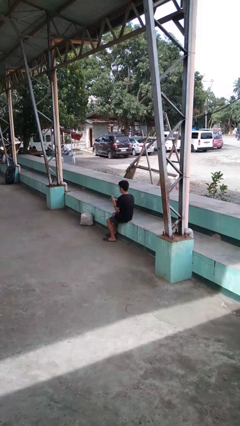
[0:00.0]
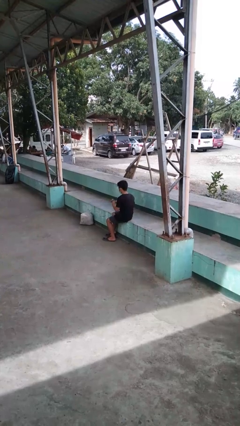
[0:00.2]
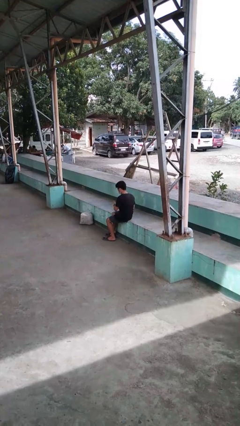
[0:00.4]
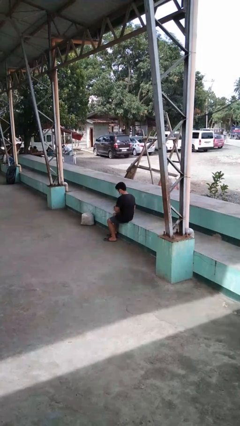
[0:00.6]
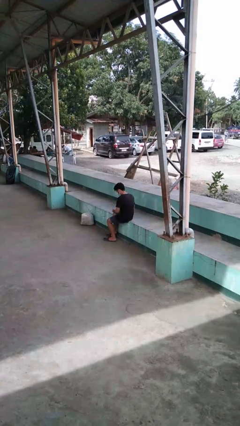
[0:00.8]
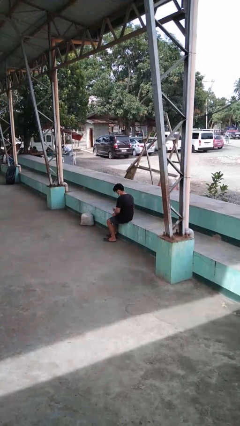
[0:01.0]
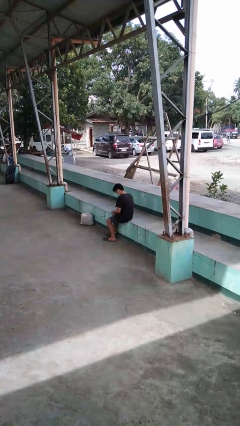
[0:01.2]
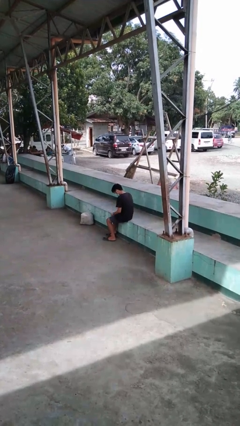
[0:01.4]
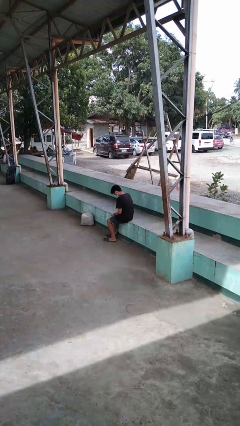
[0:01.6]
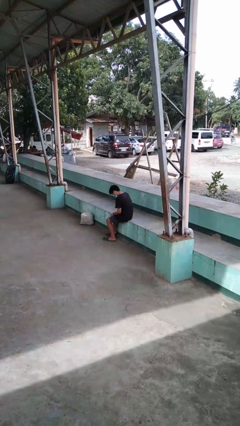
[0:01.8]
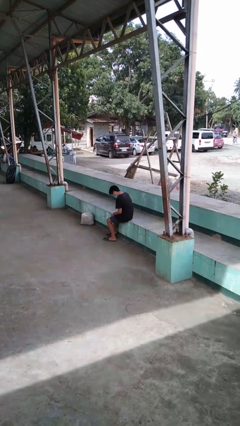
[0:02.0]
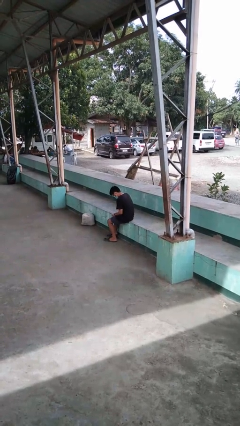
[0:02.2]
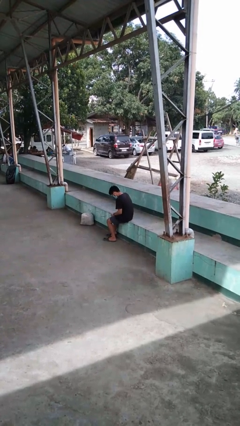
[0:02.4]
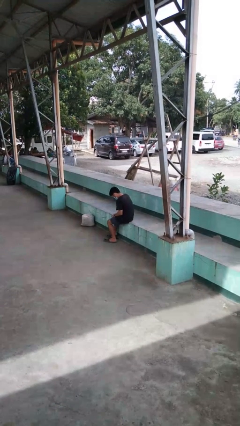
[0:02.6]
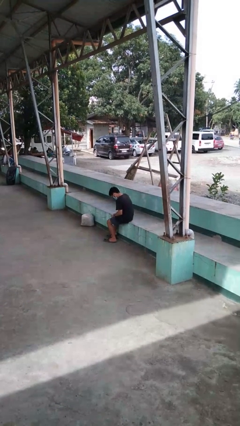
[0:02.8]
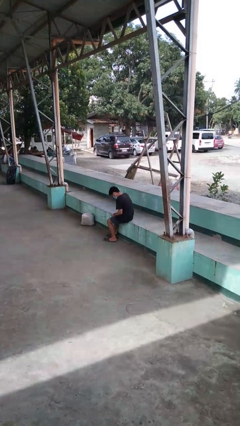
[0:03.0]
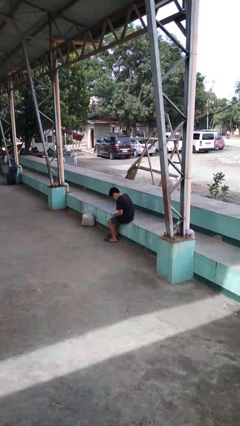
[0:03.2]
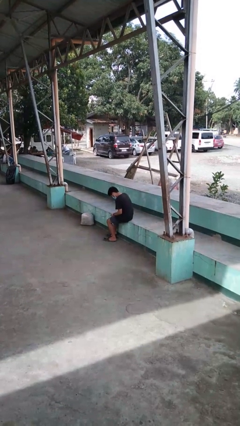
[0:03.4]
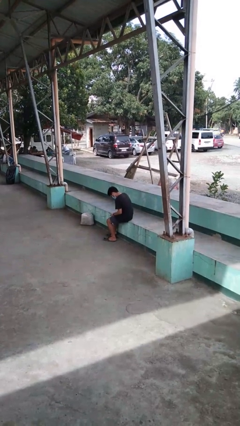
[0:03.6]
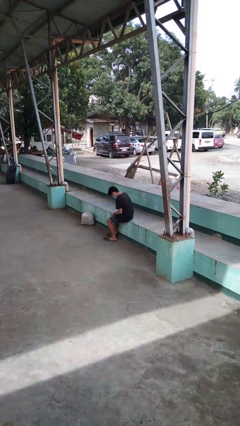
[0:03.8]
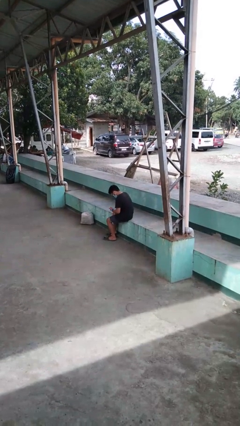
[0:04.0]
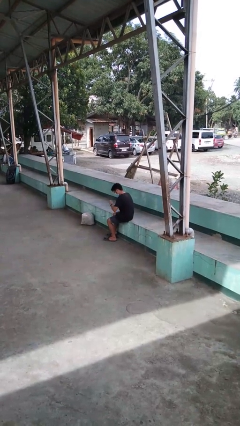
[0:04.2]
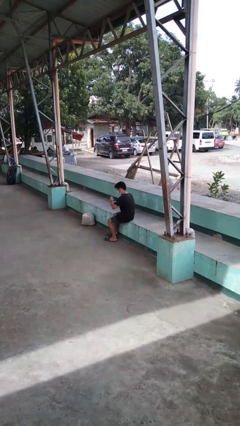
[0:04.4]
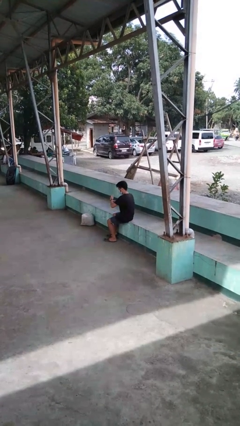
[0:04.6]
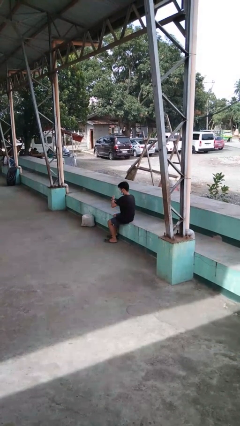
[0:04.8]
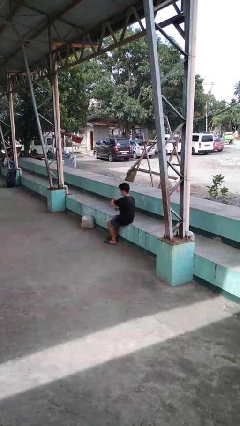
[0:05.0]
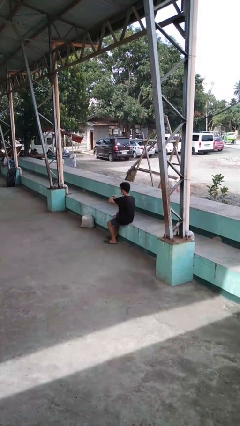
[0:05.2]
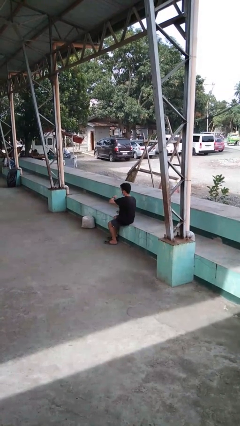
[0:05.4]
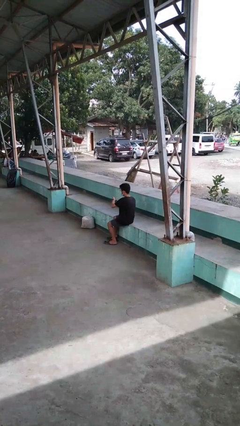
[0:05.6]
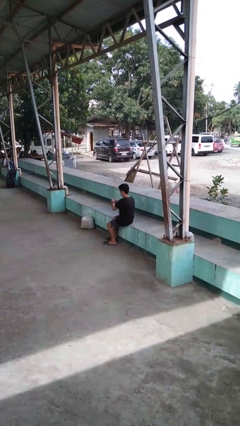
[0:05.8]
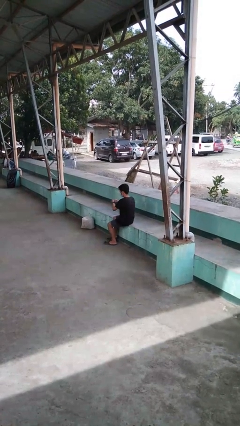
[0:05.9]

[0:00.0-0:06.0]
person puts on wristwatch

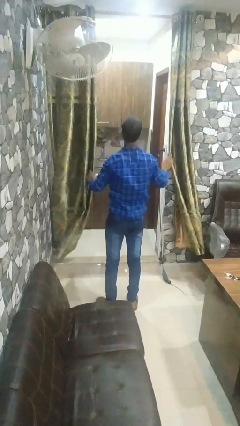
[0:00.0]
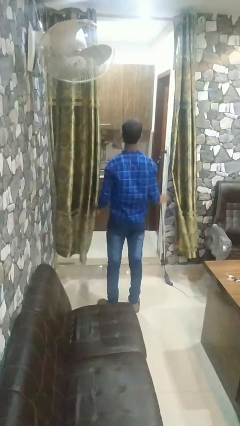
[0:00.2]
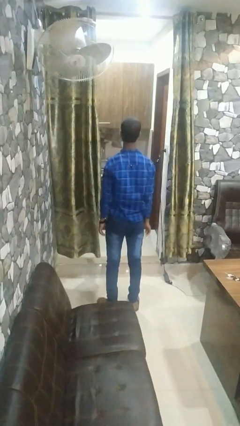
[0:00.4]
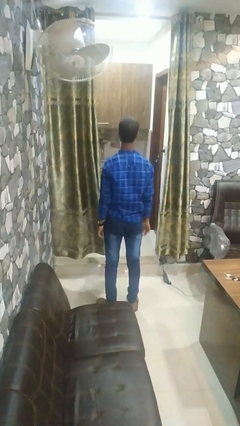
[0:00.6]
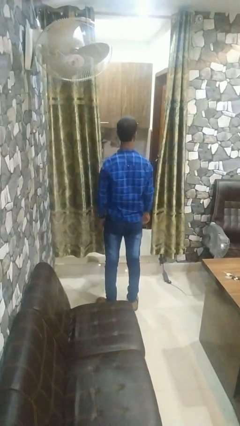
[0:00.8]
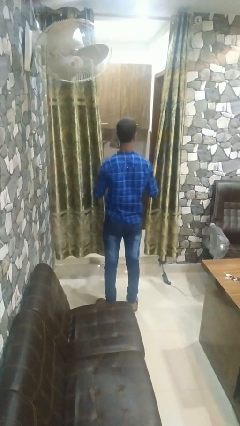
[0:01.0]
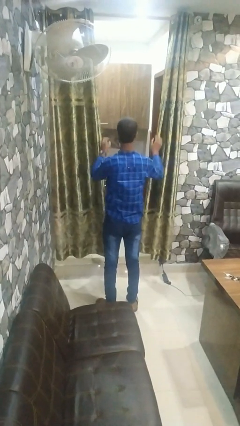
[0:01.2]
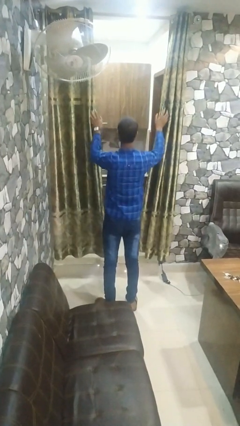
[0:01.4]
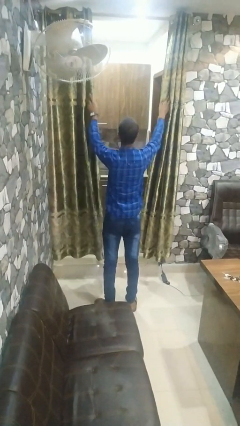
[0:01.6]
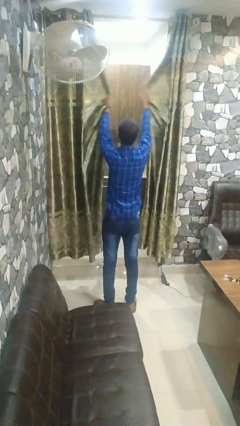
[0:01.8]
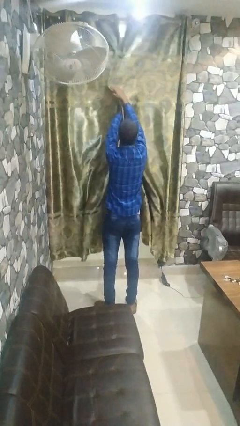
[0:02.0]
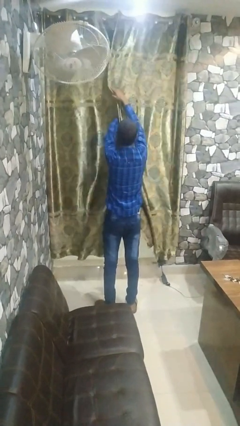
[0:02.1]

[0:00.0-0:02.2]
person closes curtains

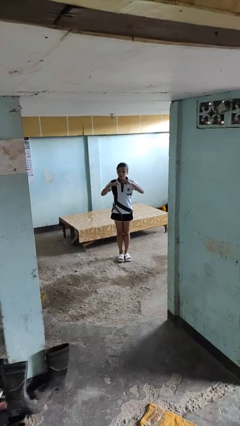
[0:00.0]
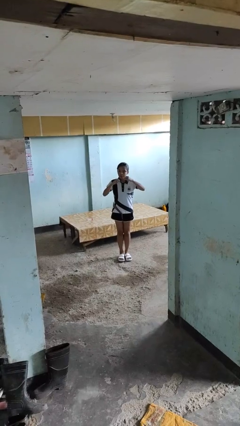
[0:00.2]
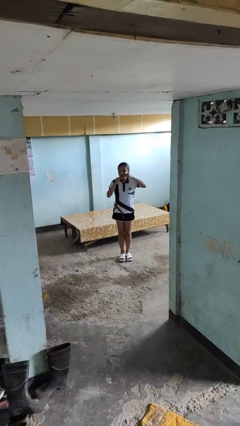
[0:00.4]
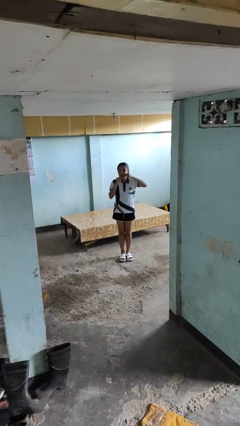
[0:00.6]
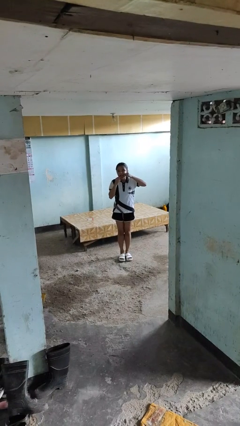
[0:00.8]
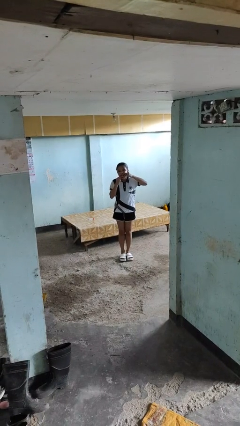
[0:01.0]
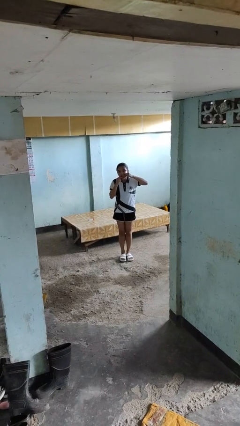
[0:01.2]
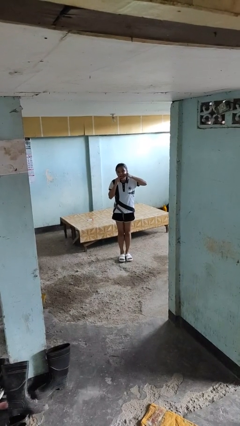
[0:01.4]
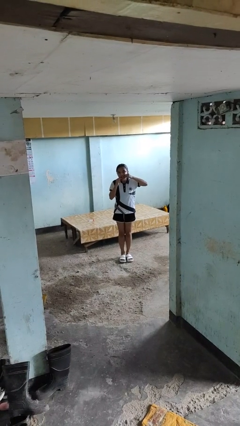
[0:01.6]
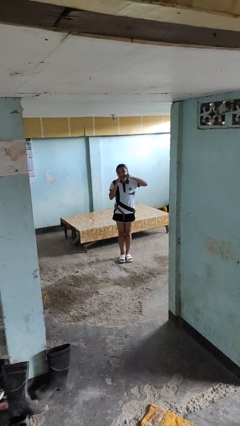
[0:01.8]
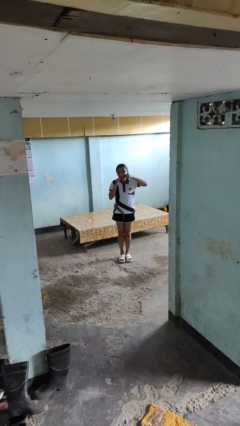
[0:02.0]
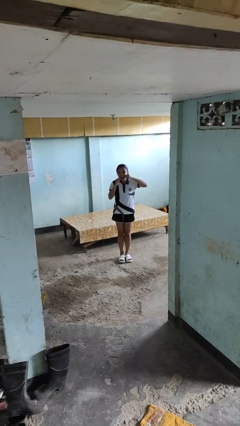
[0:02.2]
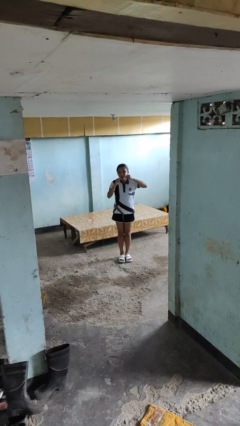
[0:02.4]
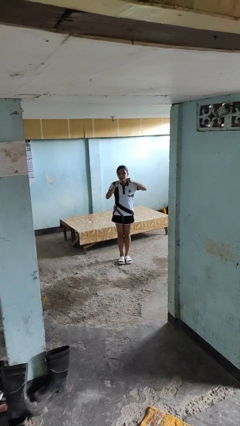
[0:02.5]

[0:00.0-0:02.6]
person flosses

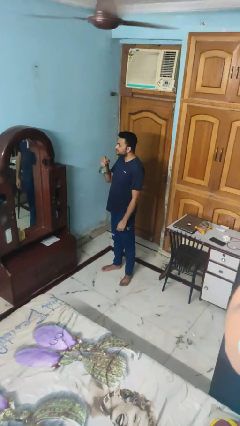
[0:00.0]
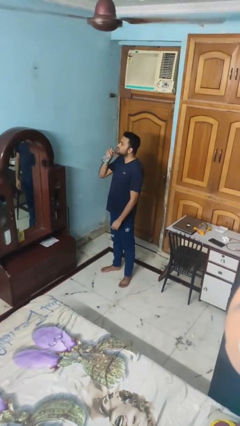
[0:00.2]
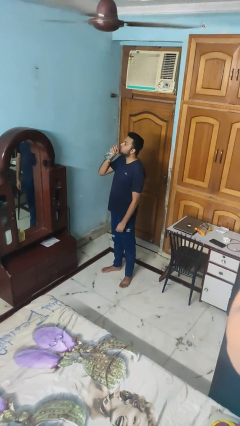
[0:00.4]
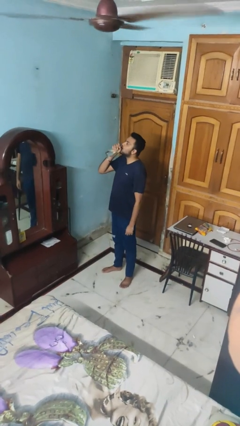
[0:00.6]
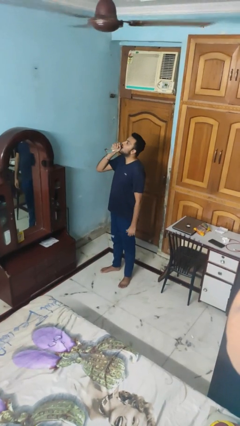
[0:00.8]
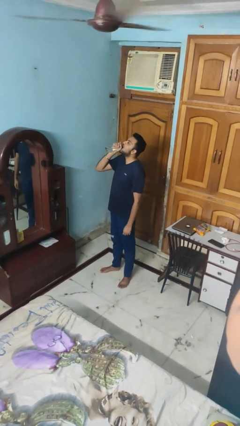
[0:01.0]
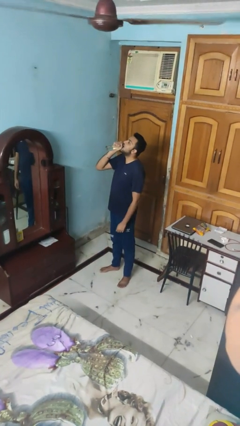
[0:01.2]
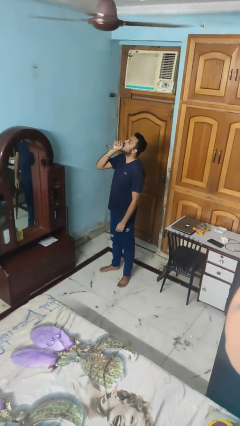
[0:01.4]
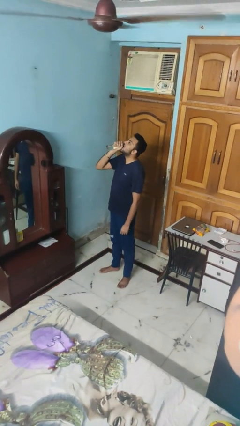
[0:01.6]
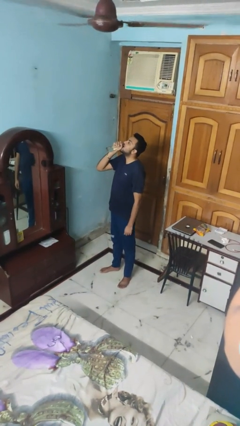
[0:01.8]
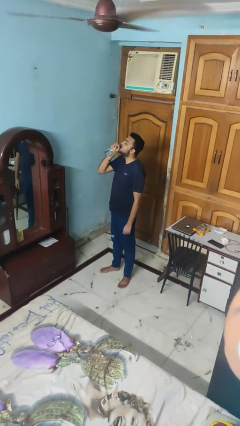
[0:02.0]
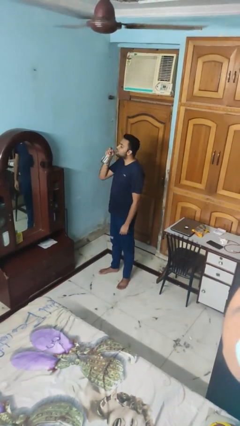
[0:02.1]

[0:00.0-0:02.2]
person drinks from bottle

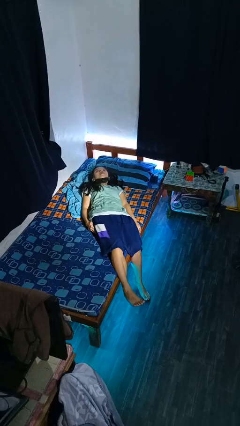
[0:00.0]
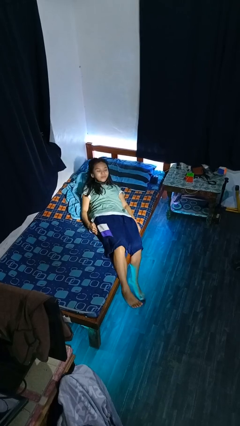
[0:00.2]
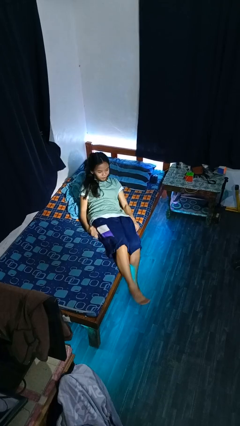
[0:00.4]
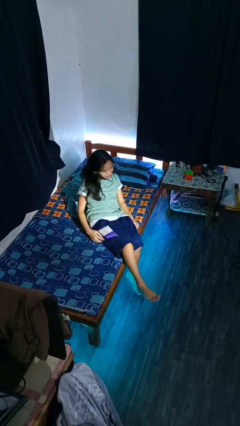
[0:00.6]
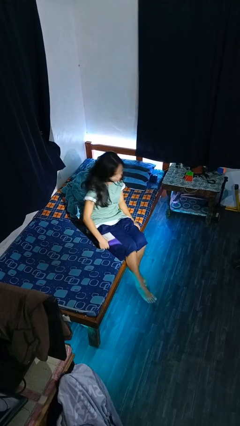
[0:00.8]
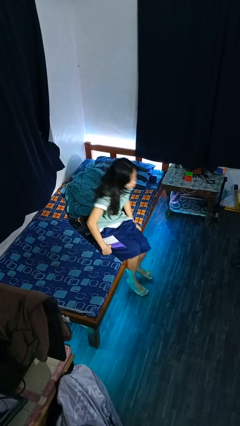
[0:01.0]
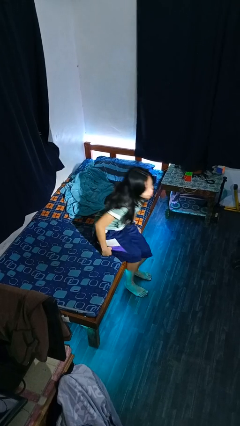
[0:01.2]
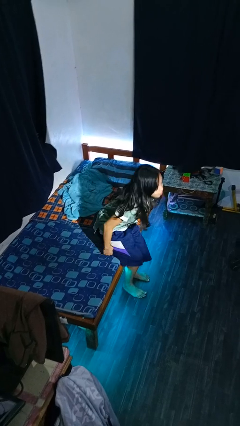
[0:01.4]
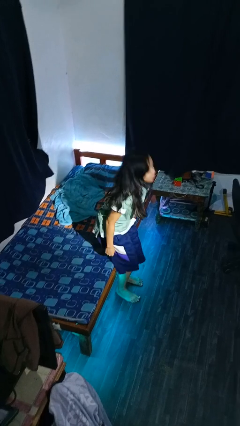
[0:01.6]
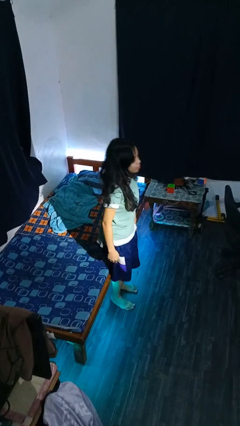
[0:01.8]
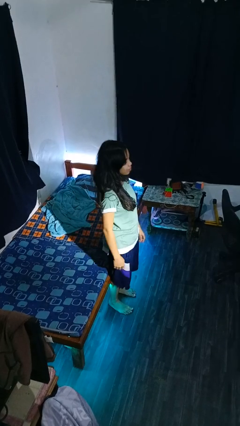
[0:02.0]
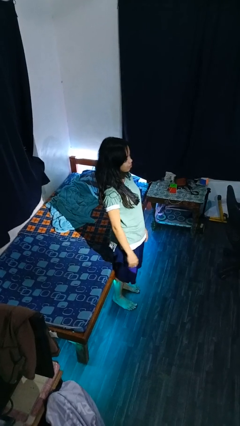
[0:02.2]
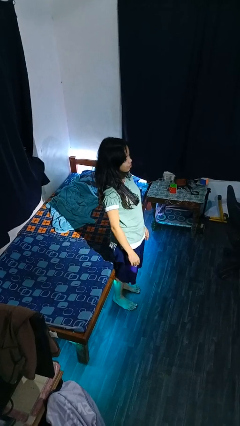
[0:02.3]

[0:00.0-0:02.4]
person stands up

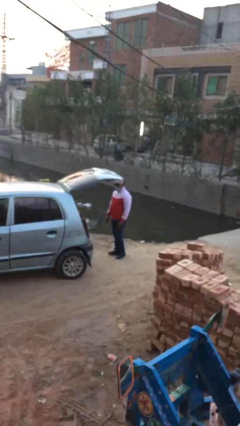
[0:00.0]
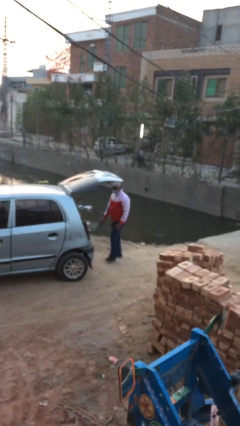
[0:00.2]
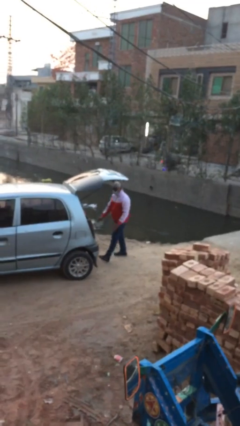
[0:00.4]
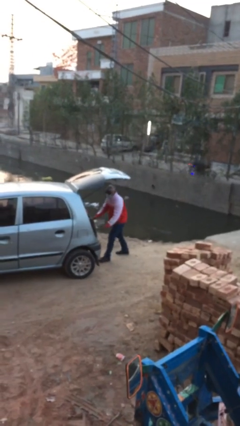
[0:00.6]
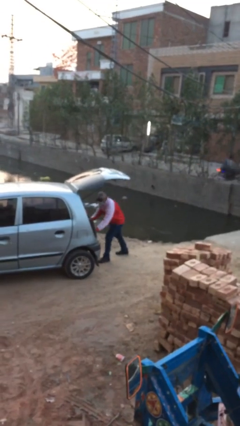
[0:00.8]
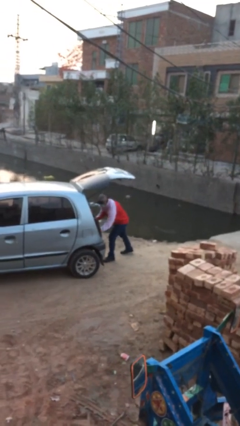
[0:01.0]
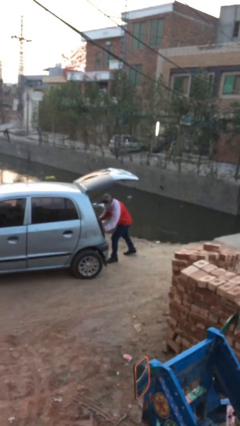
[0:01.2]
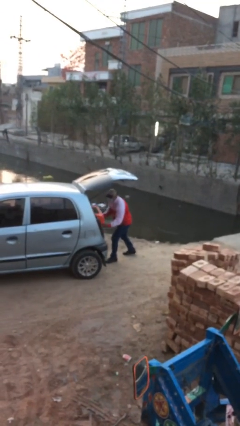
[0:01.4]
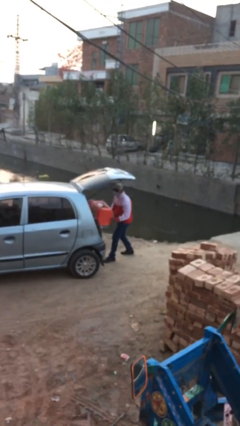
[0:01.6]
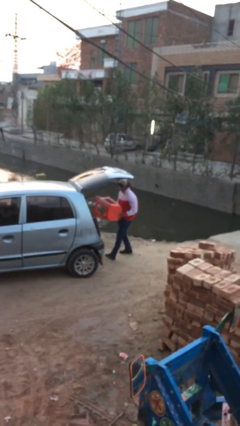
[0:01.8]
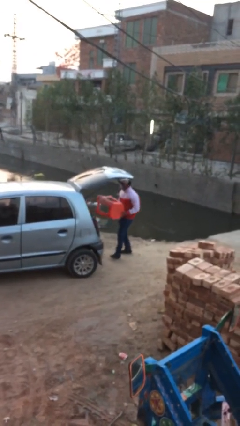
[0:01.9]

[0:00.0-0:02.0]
person unloads car

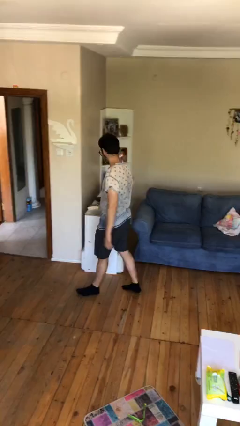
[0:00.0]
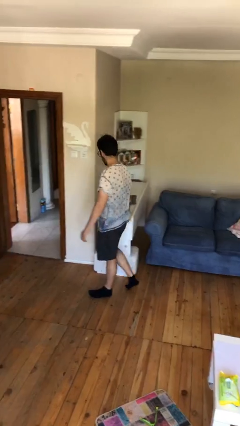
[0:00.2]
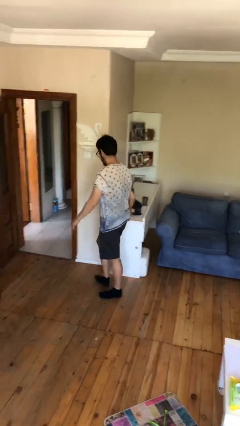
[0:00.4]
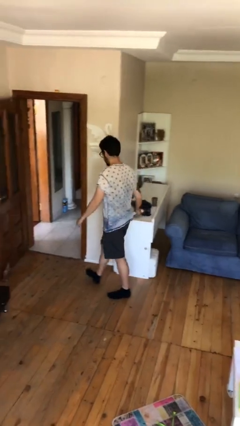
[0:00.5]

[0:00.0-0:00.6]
person puts down object on table
